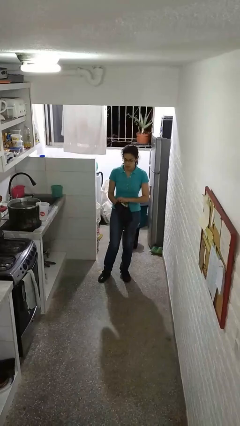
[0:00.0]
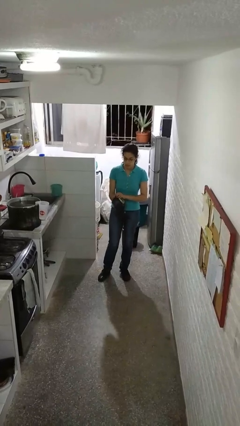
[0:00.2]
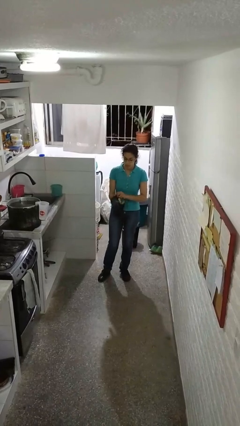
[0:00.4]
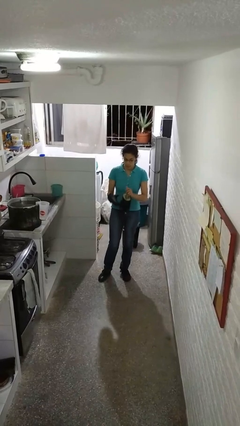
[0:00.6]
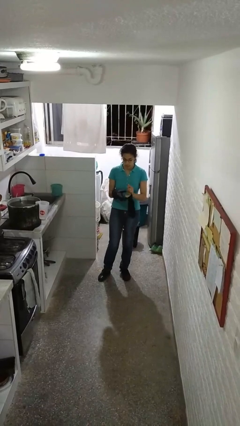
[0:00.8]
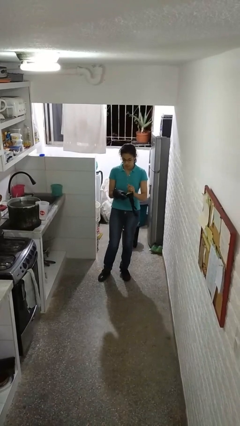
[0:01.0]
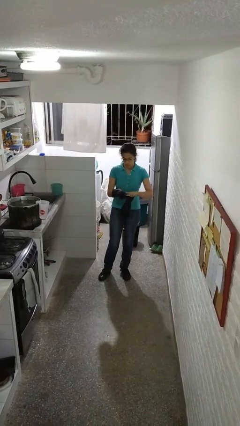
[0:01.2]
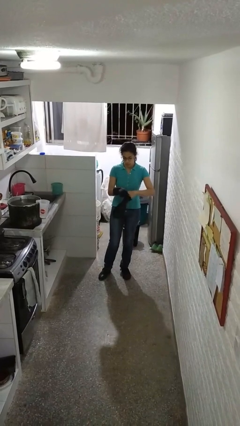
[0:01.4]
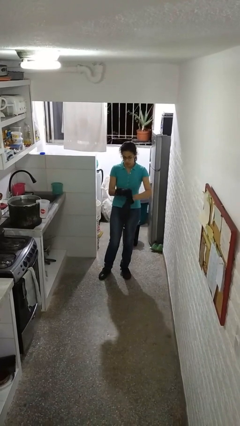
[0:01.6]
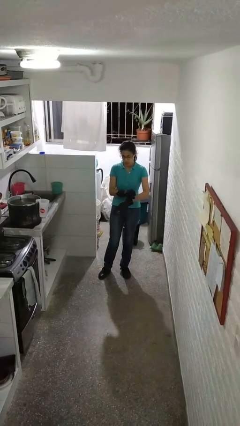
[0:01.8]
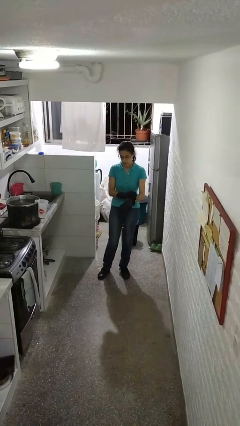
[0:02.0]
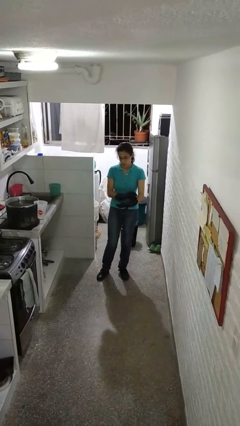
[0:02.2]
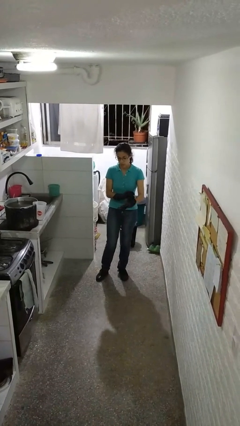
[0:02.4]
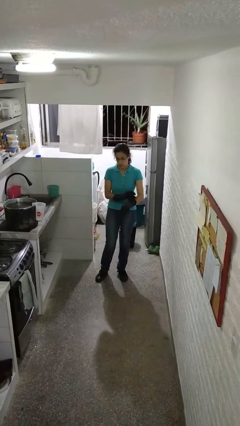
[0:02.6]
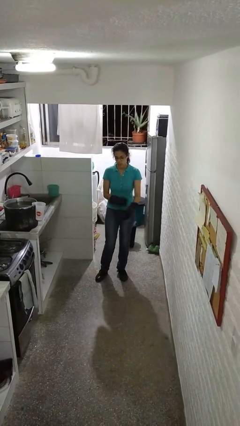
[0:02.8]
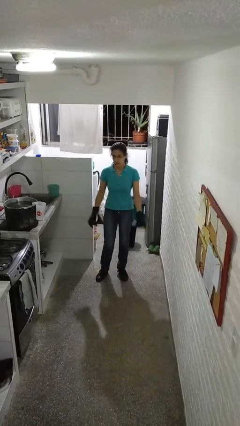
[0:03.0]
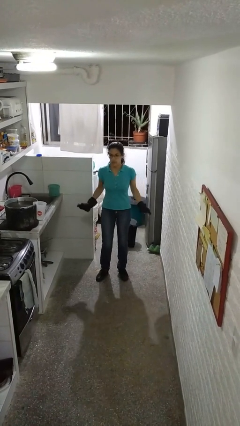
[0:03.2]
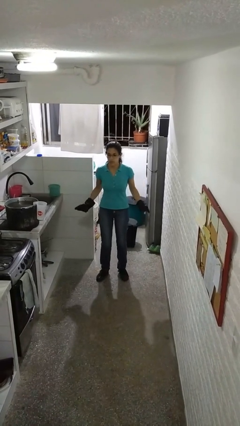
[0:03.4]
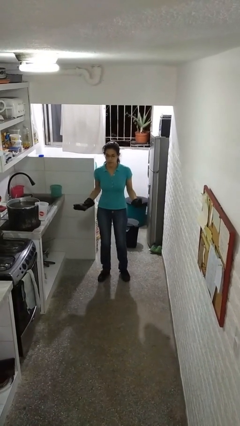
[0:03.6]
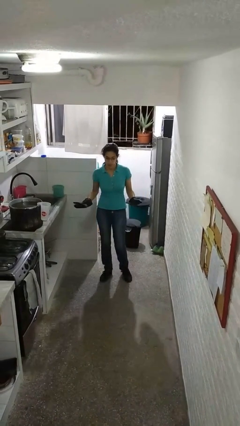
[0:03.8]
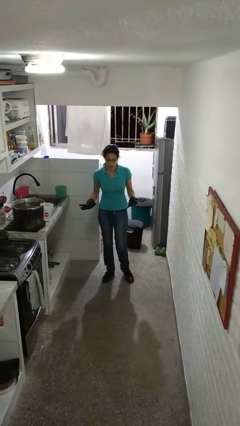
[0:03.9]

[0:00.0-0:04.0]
person puts on gloves

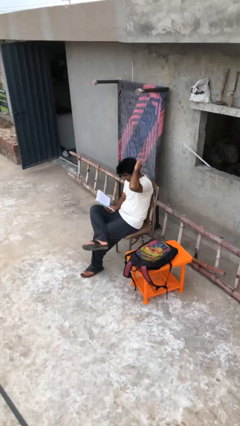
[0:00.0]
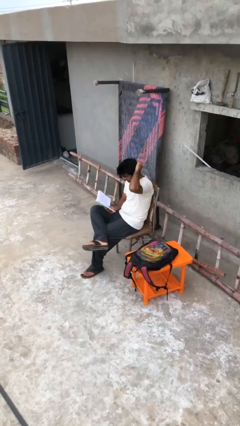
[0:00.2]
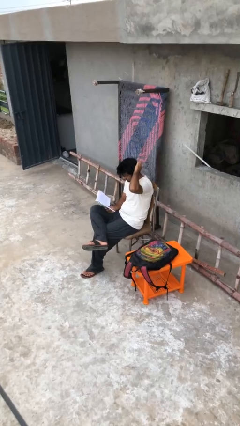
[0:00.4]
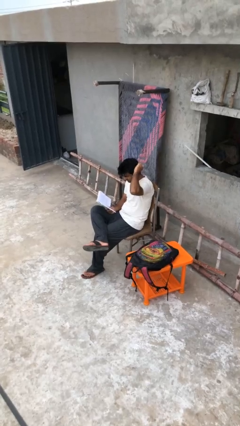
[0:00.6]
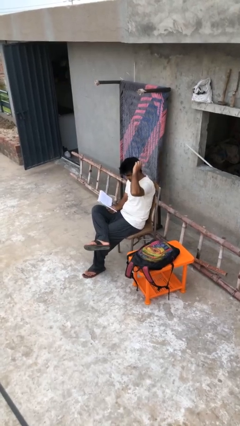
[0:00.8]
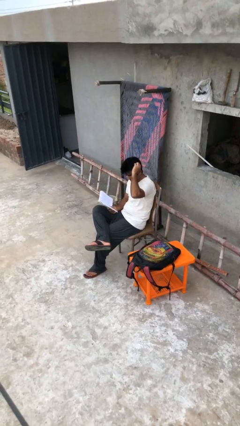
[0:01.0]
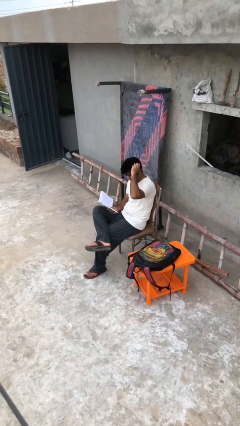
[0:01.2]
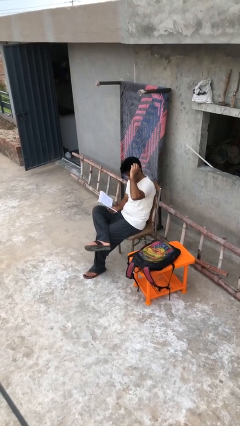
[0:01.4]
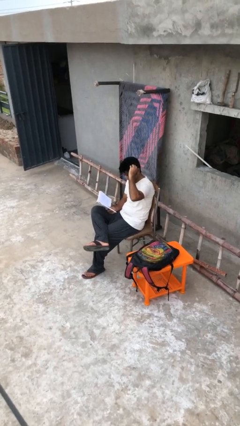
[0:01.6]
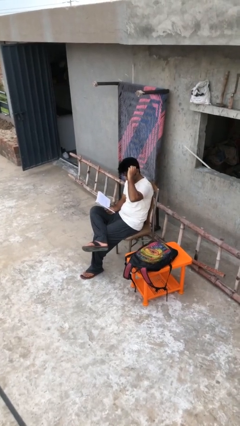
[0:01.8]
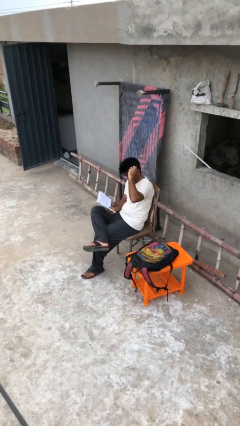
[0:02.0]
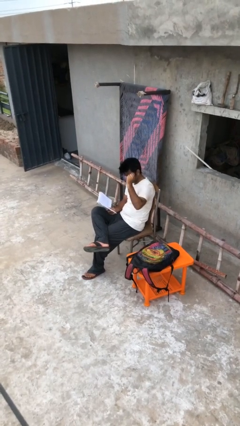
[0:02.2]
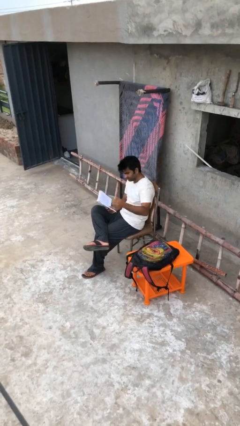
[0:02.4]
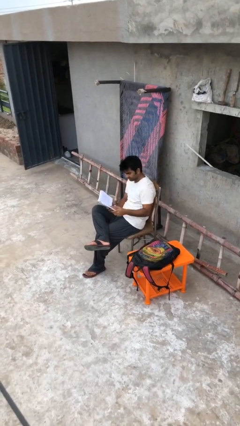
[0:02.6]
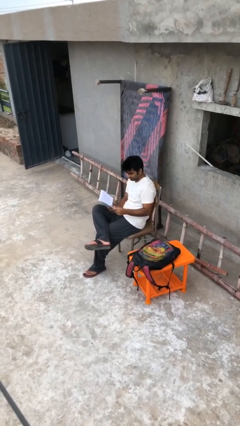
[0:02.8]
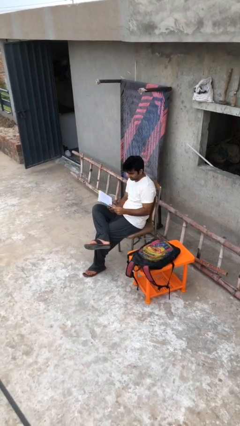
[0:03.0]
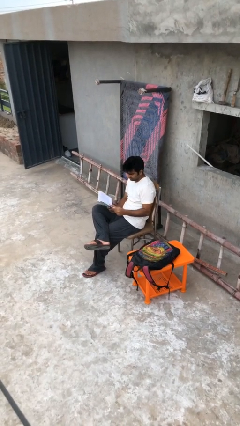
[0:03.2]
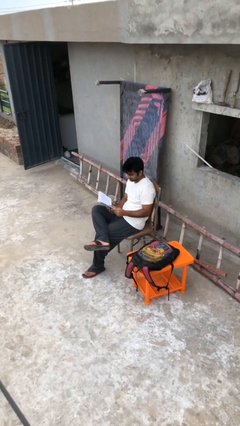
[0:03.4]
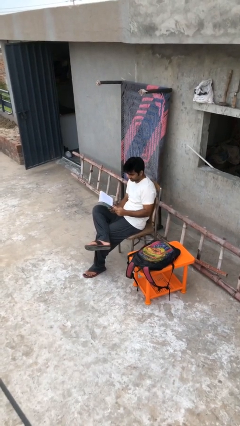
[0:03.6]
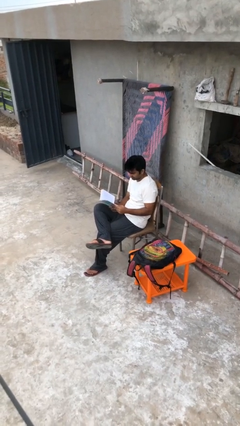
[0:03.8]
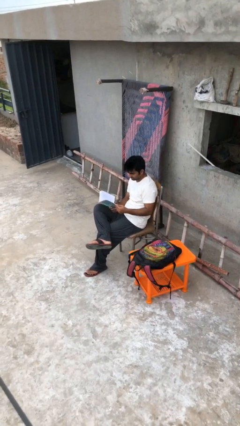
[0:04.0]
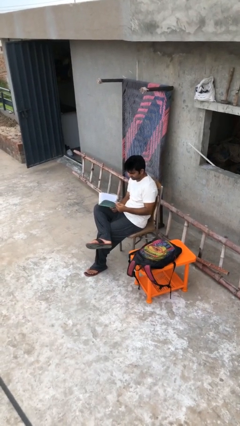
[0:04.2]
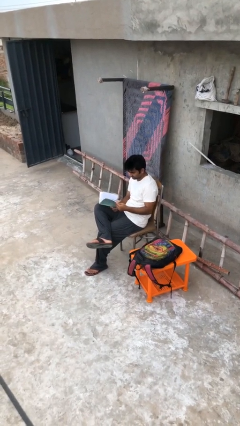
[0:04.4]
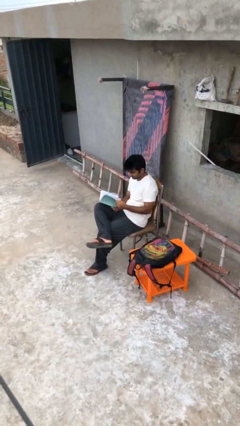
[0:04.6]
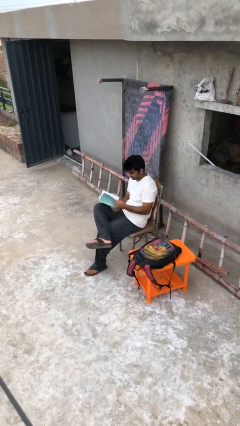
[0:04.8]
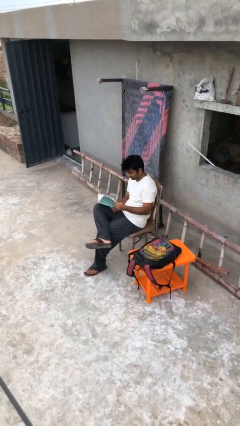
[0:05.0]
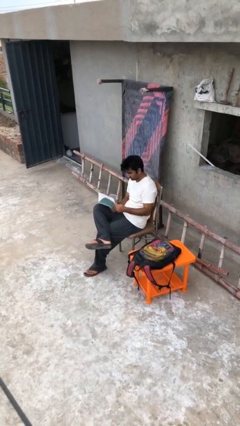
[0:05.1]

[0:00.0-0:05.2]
person reads document

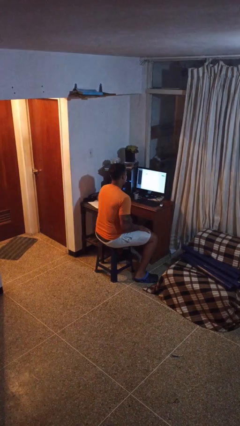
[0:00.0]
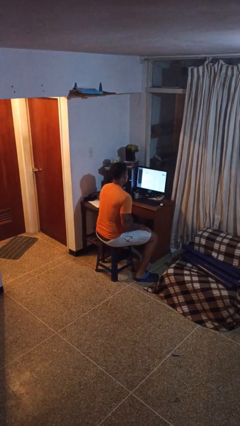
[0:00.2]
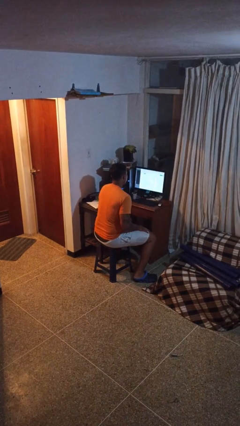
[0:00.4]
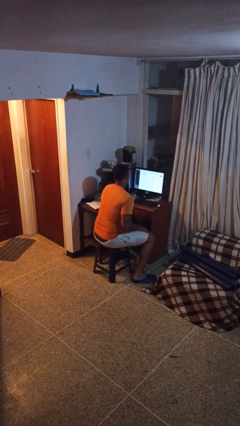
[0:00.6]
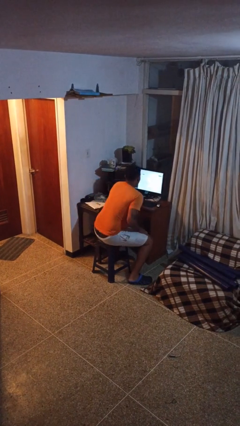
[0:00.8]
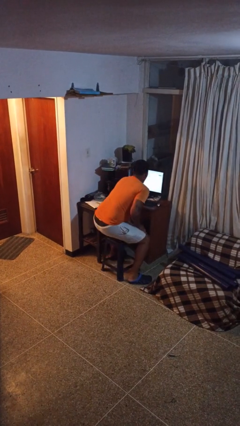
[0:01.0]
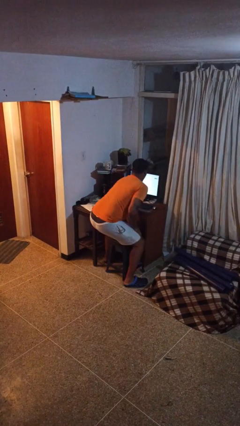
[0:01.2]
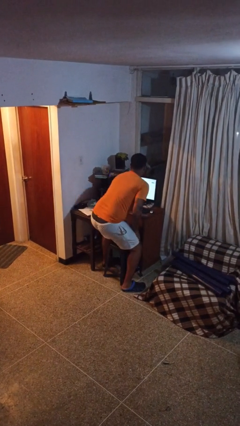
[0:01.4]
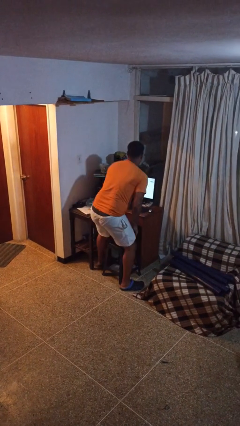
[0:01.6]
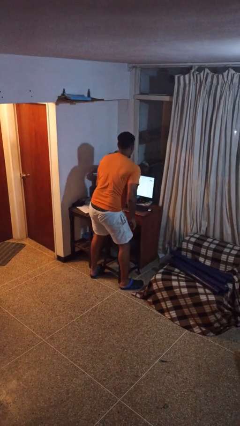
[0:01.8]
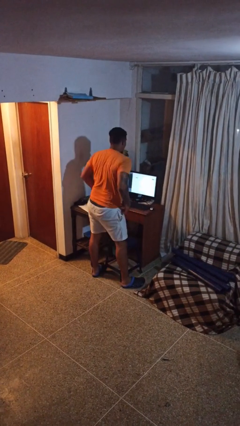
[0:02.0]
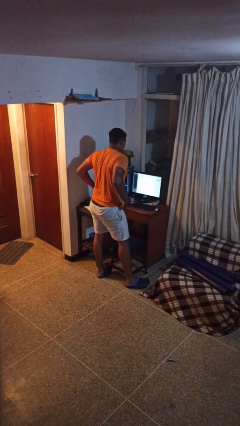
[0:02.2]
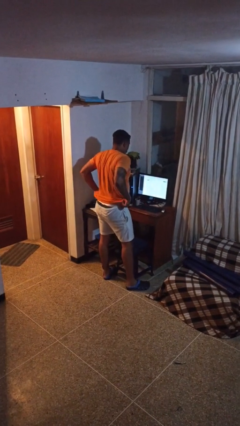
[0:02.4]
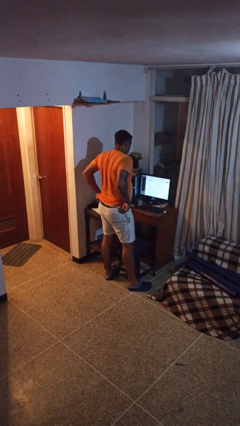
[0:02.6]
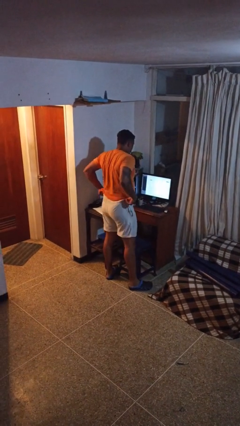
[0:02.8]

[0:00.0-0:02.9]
person stands up

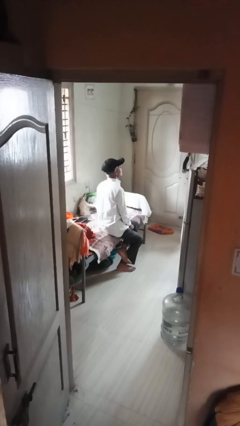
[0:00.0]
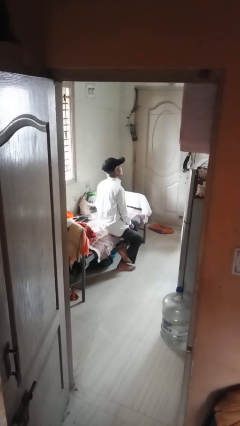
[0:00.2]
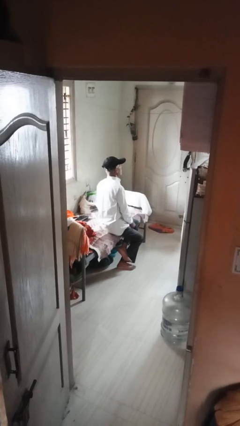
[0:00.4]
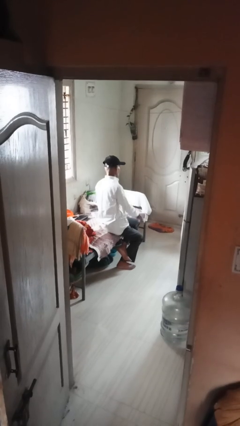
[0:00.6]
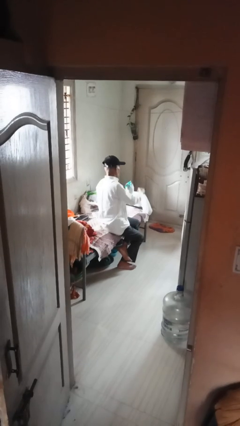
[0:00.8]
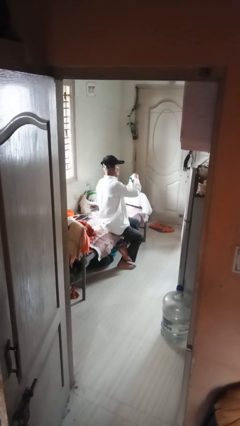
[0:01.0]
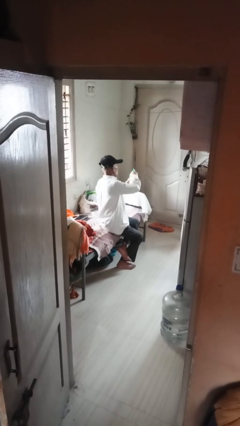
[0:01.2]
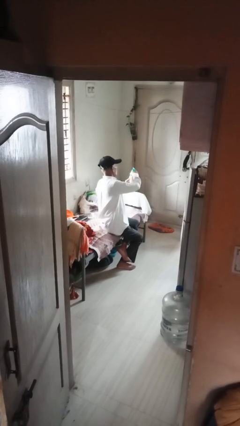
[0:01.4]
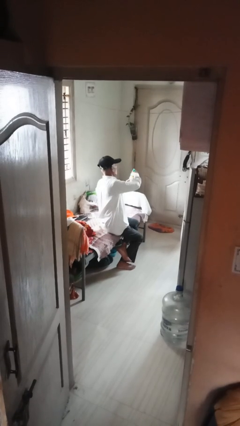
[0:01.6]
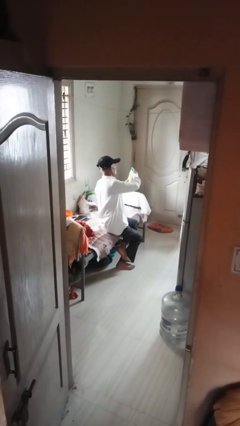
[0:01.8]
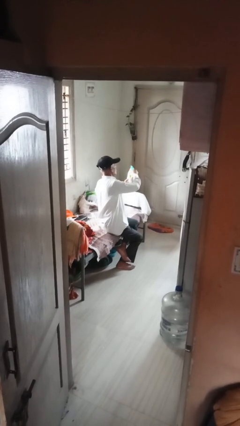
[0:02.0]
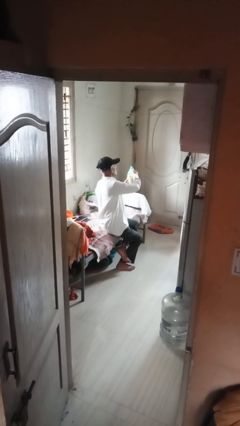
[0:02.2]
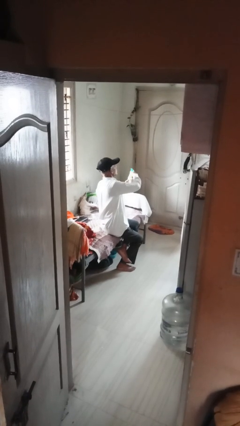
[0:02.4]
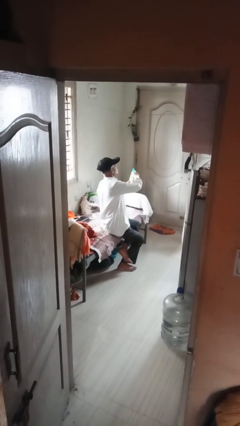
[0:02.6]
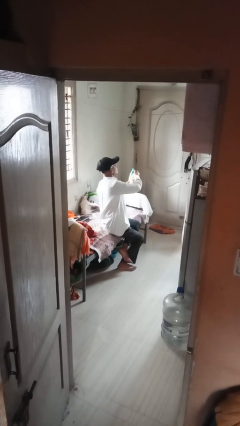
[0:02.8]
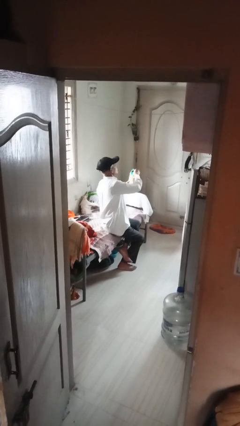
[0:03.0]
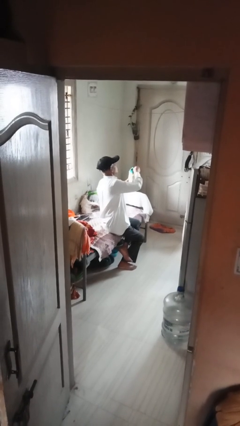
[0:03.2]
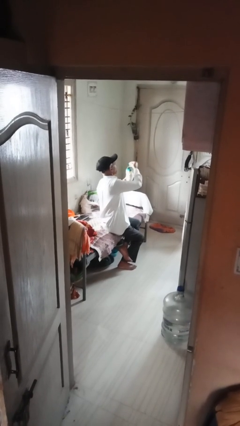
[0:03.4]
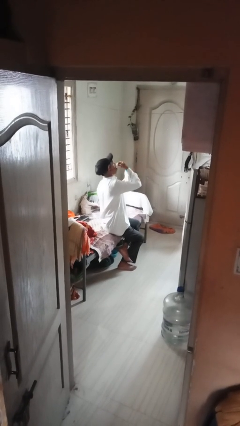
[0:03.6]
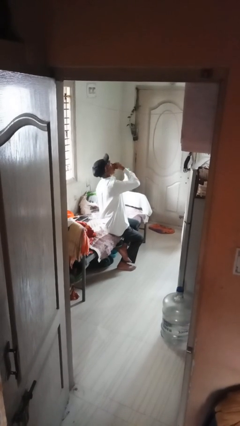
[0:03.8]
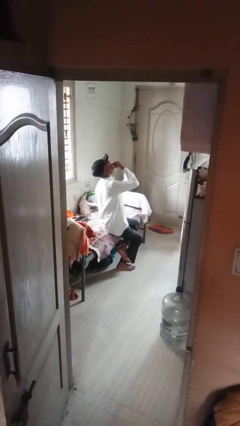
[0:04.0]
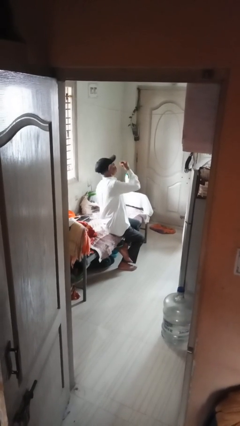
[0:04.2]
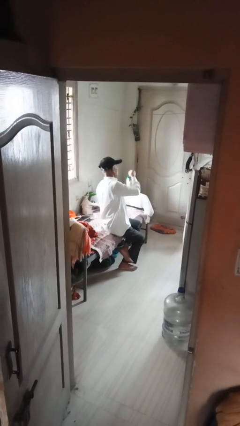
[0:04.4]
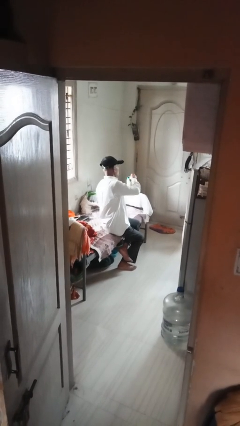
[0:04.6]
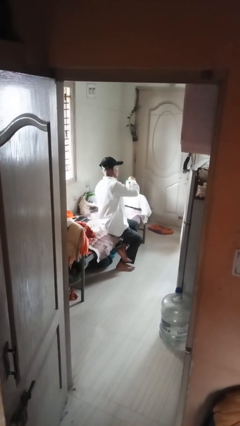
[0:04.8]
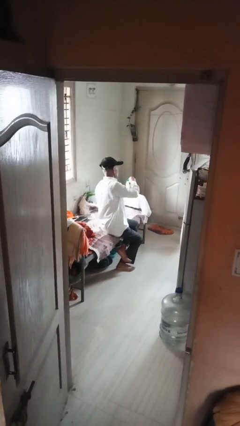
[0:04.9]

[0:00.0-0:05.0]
person eats snack from bag

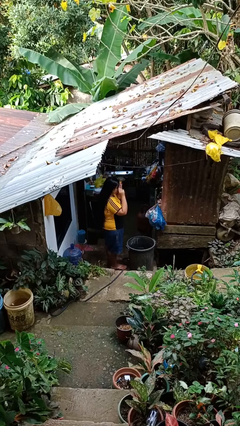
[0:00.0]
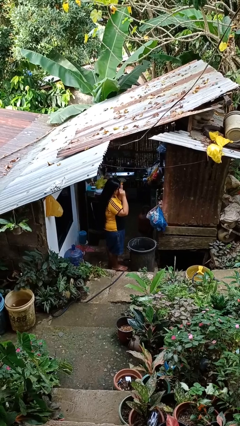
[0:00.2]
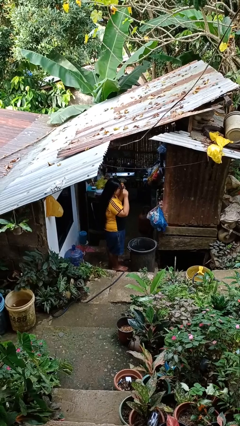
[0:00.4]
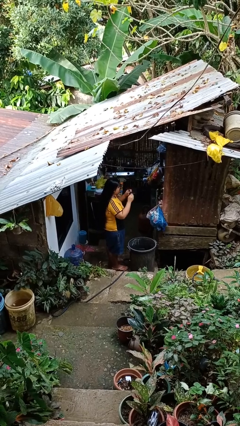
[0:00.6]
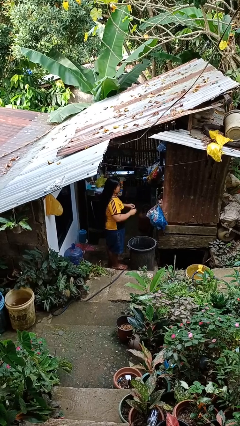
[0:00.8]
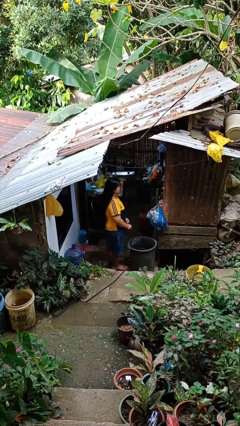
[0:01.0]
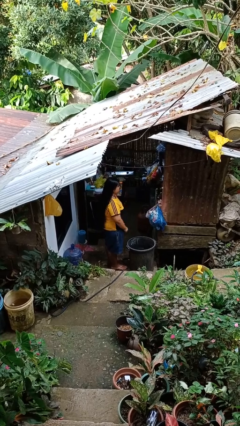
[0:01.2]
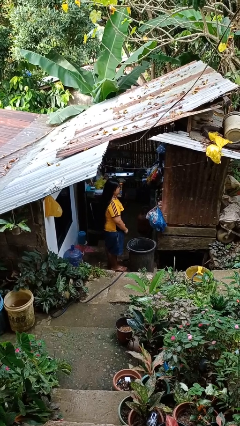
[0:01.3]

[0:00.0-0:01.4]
person takes off sunglasses
